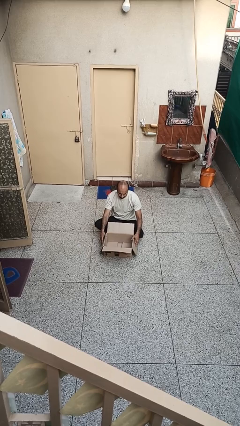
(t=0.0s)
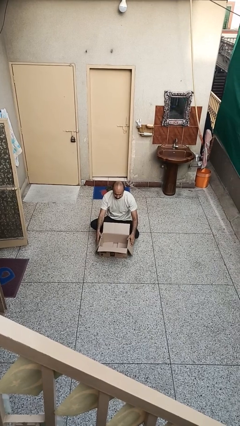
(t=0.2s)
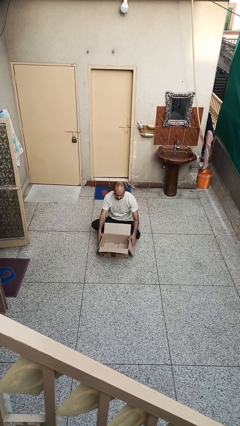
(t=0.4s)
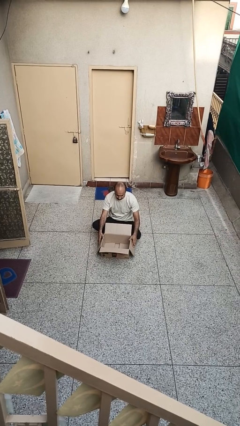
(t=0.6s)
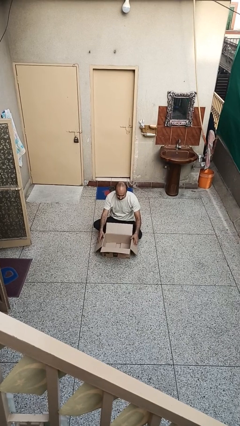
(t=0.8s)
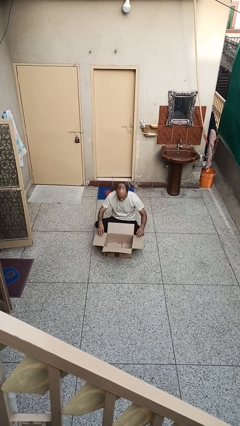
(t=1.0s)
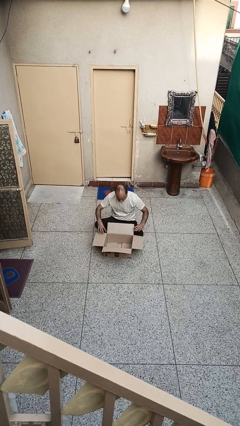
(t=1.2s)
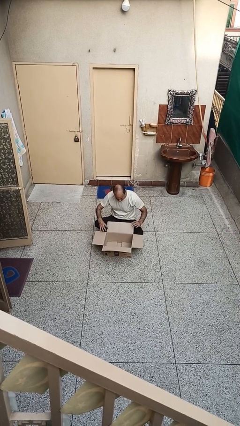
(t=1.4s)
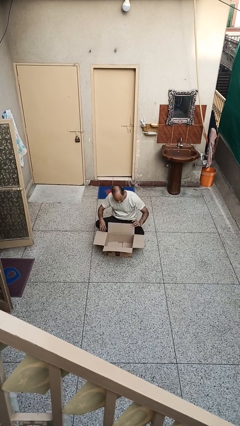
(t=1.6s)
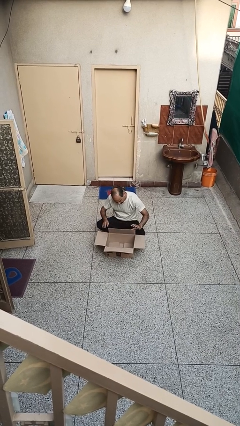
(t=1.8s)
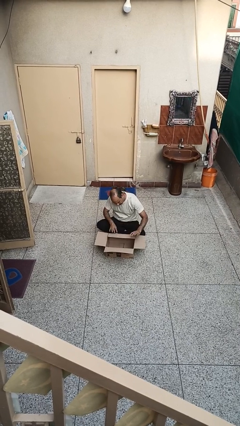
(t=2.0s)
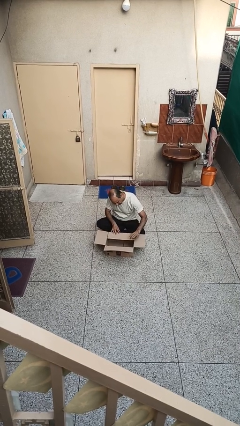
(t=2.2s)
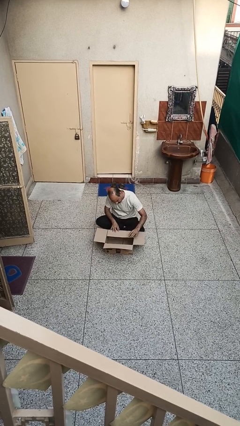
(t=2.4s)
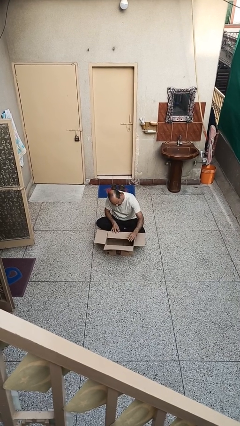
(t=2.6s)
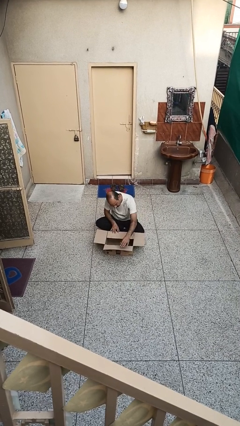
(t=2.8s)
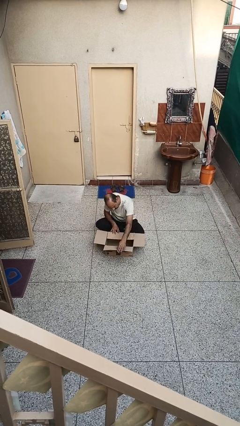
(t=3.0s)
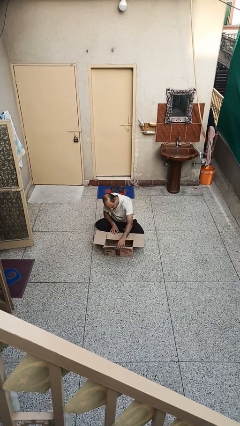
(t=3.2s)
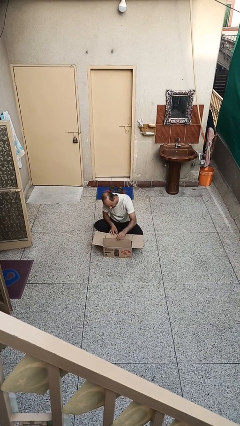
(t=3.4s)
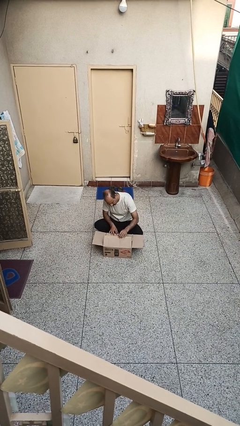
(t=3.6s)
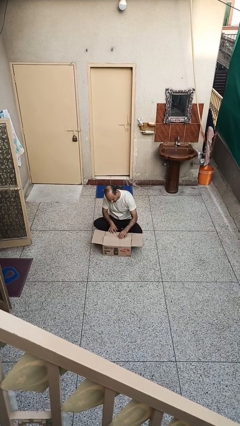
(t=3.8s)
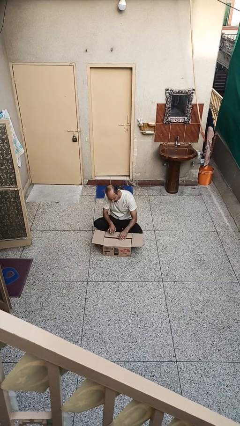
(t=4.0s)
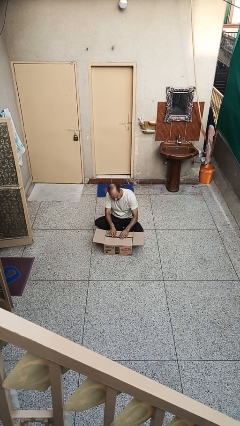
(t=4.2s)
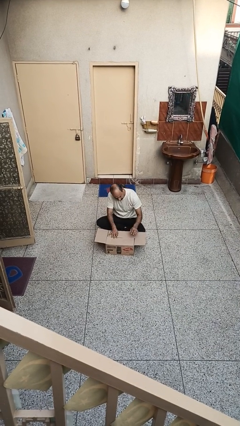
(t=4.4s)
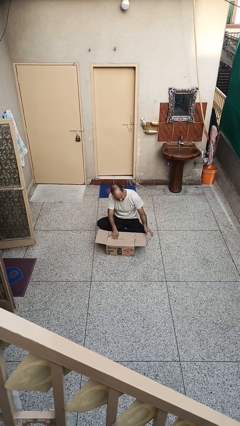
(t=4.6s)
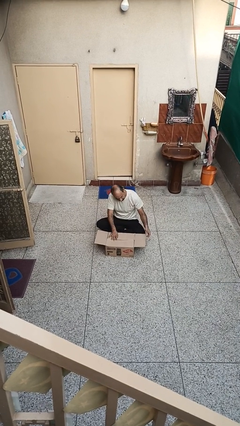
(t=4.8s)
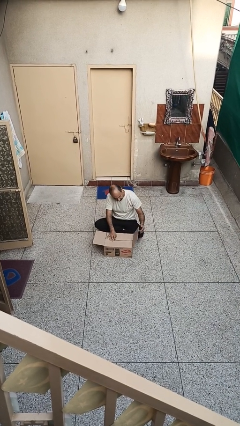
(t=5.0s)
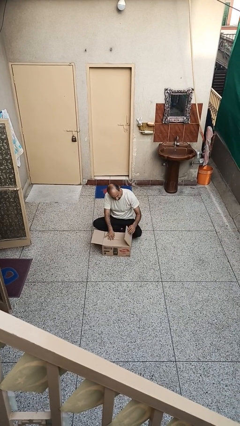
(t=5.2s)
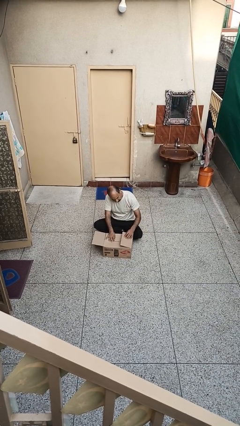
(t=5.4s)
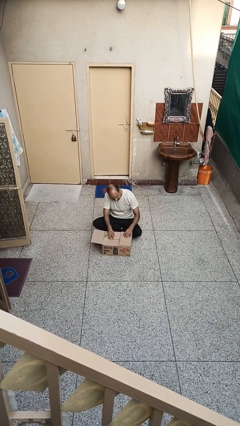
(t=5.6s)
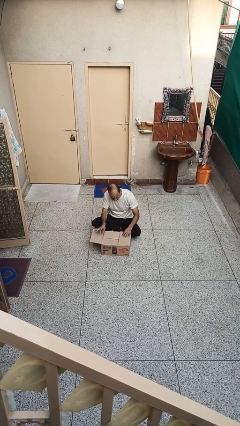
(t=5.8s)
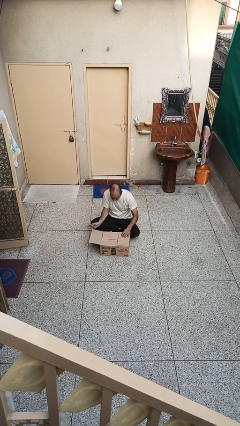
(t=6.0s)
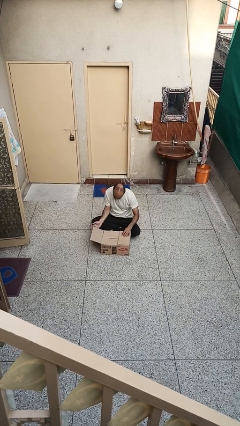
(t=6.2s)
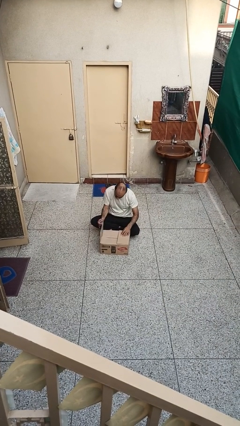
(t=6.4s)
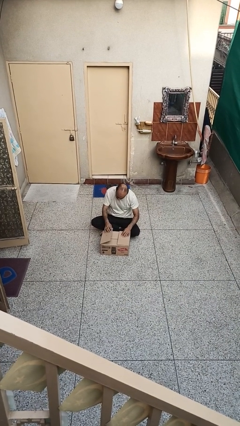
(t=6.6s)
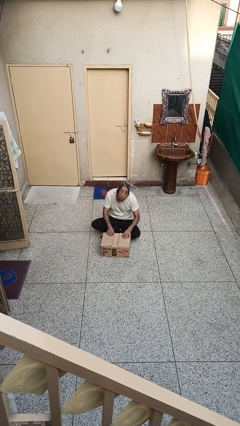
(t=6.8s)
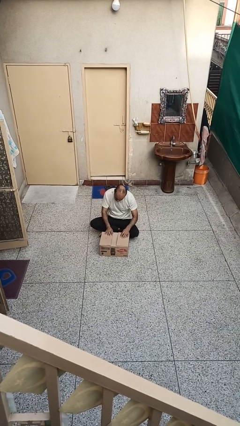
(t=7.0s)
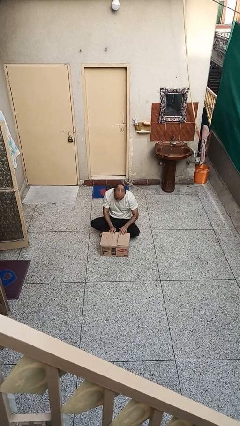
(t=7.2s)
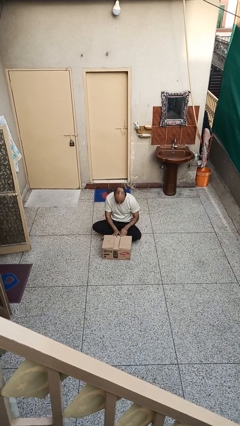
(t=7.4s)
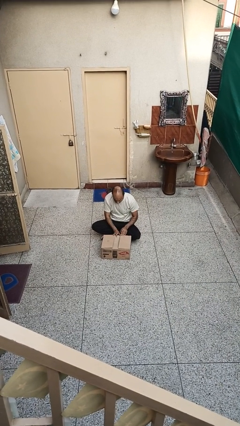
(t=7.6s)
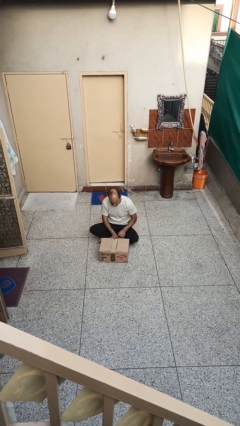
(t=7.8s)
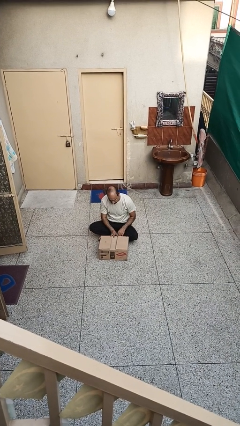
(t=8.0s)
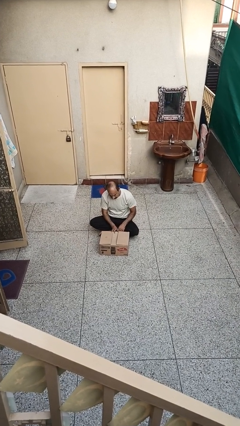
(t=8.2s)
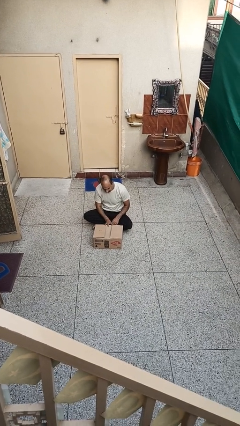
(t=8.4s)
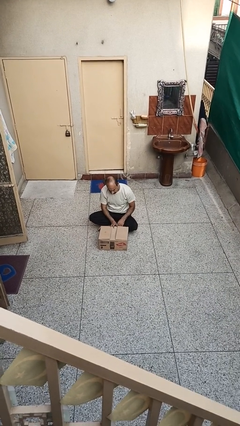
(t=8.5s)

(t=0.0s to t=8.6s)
person closes box

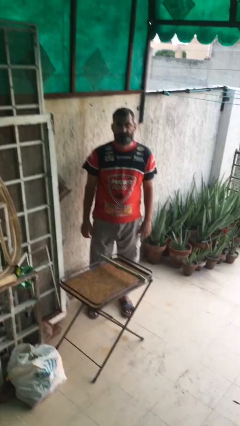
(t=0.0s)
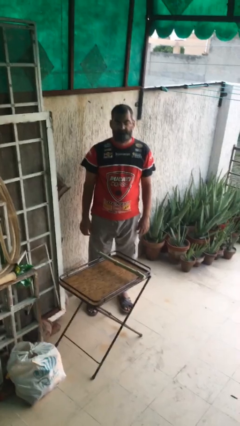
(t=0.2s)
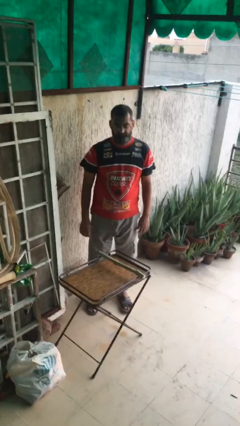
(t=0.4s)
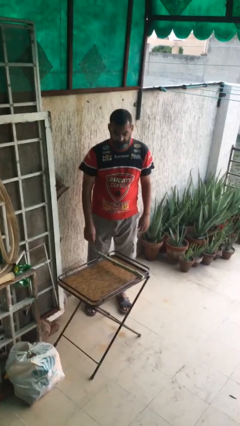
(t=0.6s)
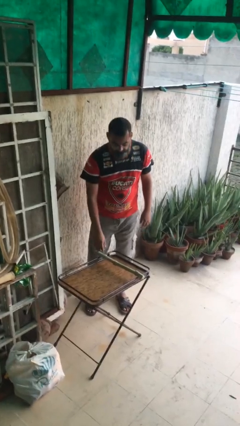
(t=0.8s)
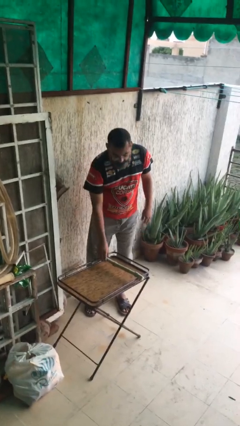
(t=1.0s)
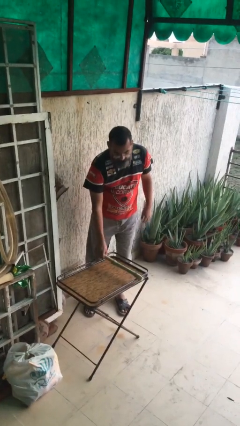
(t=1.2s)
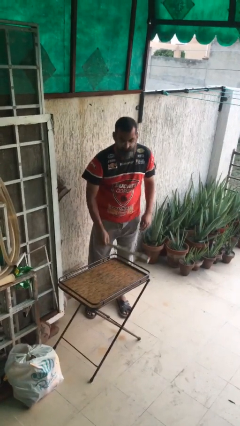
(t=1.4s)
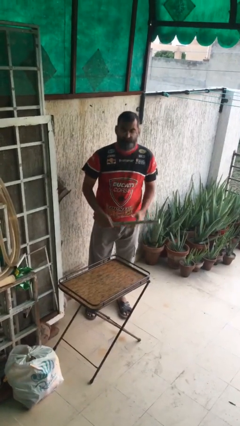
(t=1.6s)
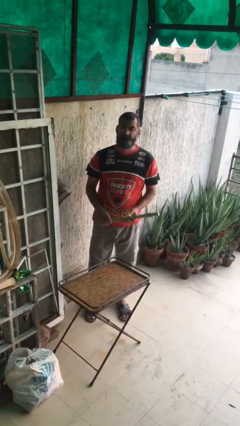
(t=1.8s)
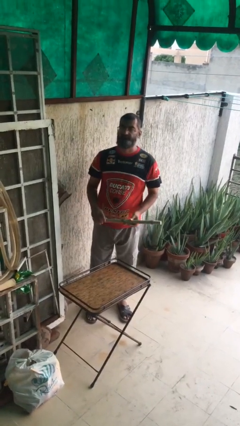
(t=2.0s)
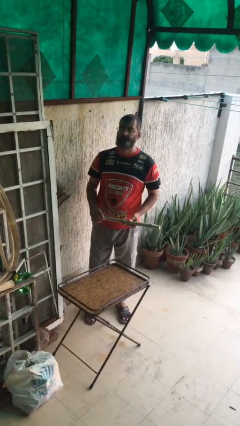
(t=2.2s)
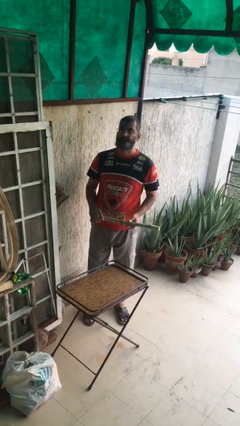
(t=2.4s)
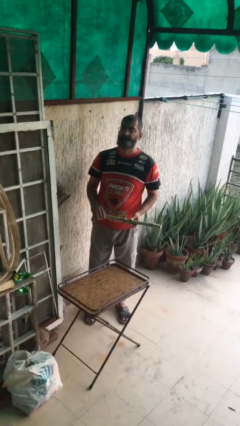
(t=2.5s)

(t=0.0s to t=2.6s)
person picks up object from table

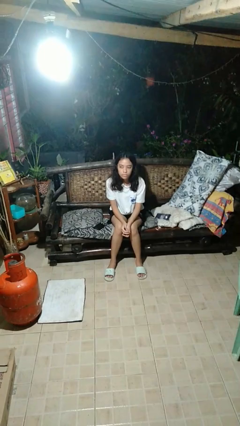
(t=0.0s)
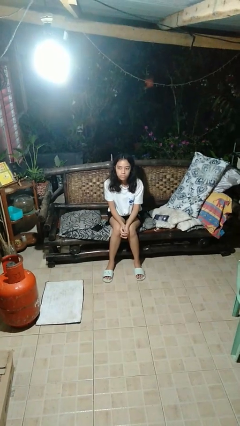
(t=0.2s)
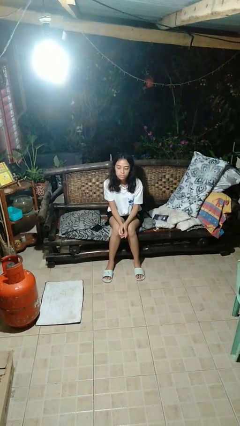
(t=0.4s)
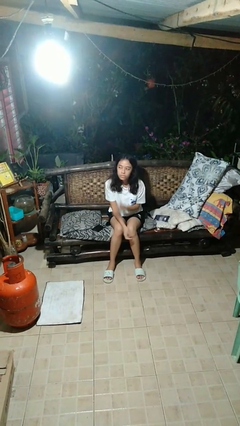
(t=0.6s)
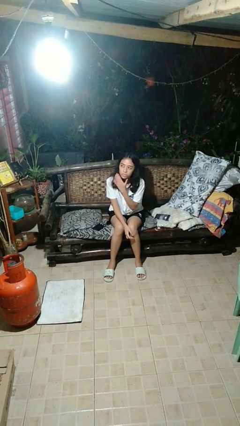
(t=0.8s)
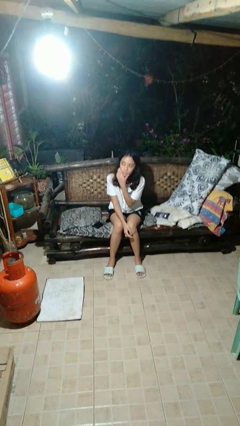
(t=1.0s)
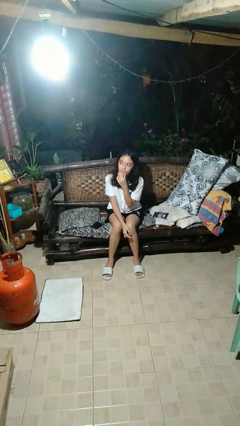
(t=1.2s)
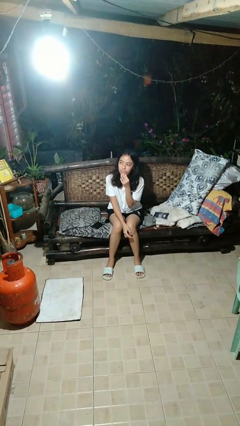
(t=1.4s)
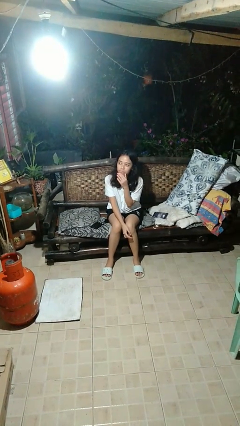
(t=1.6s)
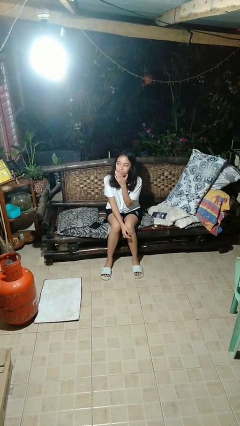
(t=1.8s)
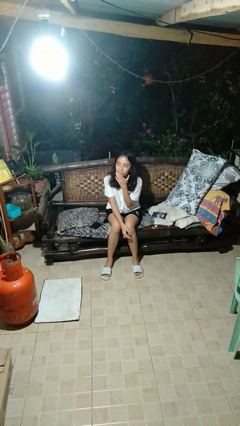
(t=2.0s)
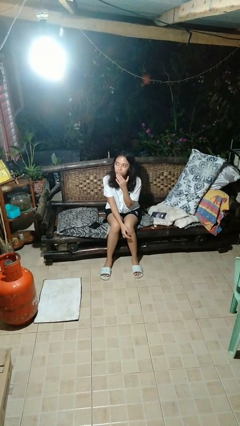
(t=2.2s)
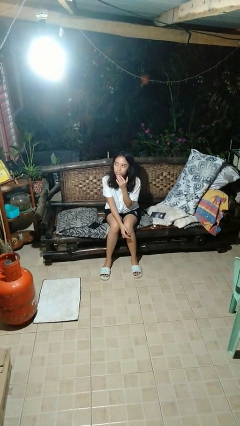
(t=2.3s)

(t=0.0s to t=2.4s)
person strokes chin

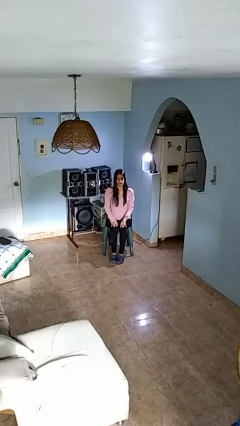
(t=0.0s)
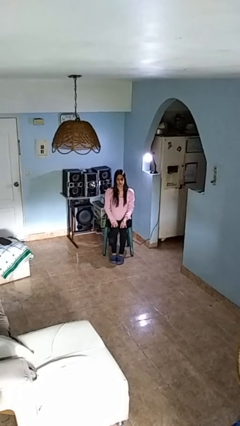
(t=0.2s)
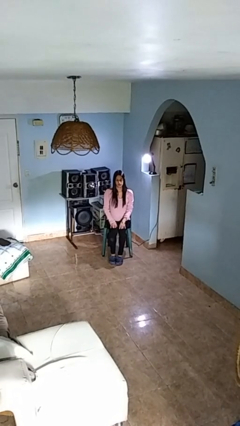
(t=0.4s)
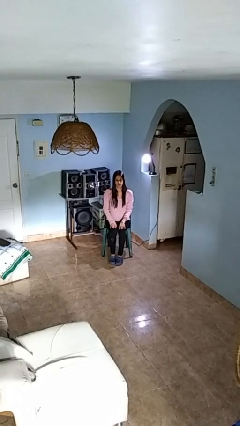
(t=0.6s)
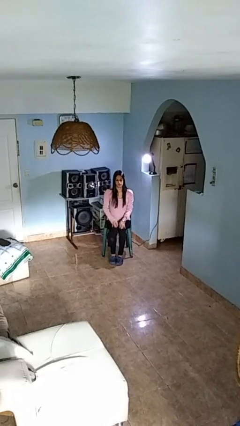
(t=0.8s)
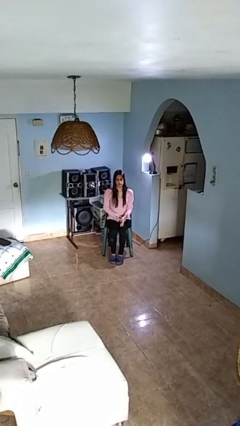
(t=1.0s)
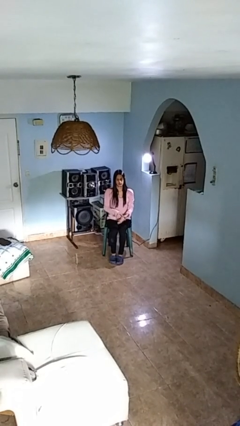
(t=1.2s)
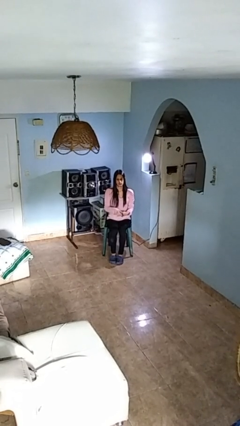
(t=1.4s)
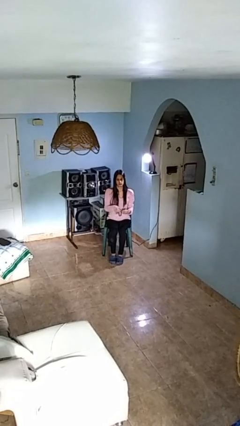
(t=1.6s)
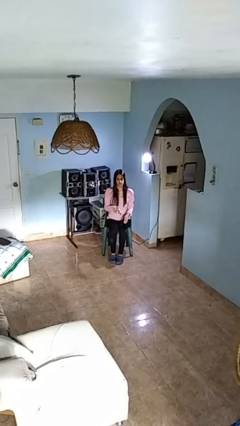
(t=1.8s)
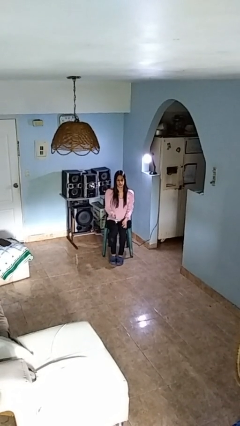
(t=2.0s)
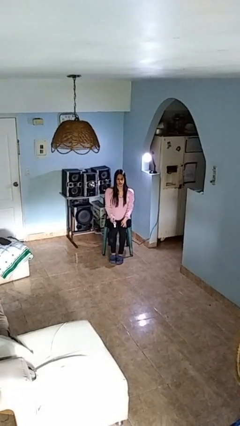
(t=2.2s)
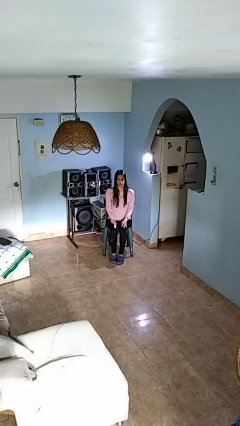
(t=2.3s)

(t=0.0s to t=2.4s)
person takes off wristwatch

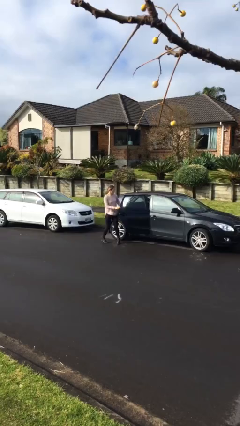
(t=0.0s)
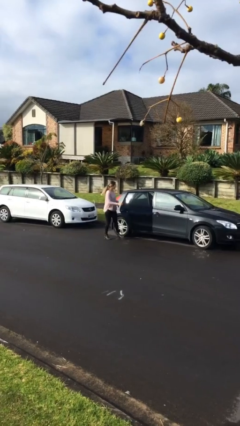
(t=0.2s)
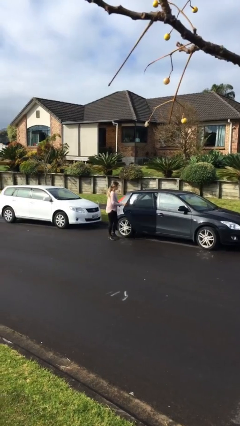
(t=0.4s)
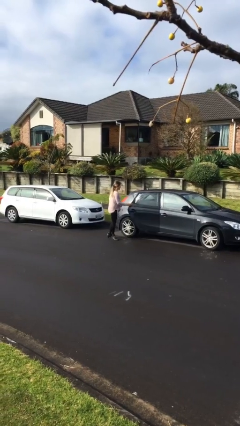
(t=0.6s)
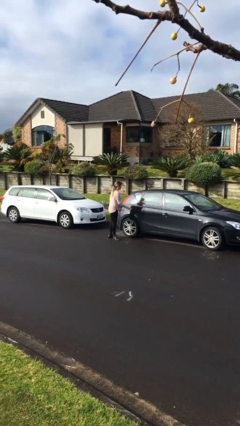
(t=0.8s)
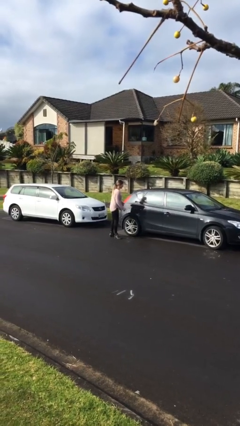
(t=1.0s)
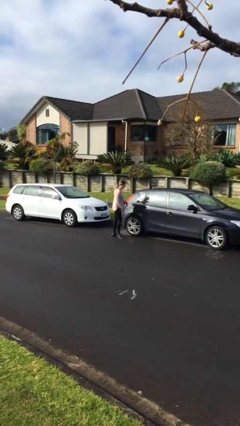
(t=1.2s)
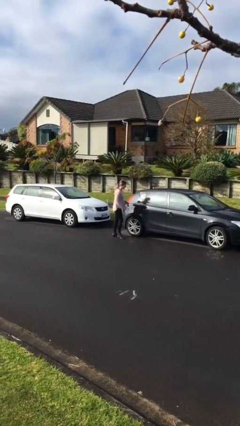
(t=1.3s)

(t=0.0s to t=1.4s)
person closes car door

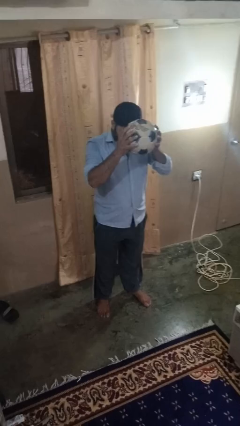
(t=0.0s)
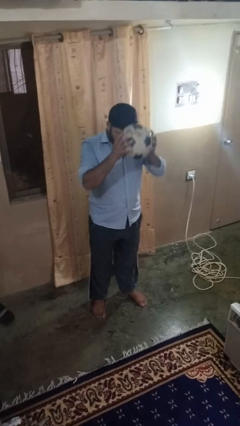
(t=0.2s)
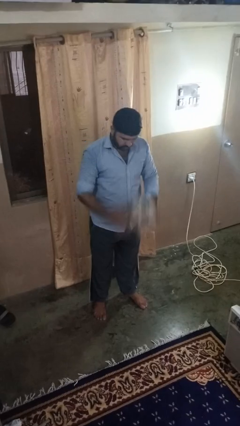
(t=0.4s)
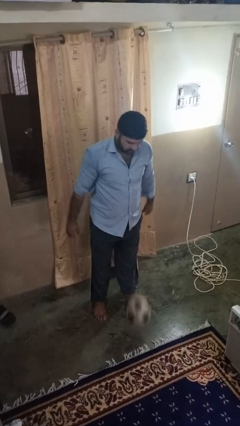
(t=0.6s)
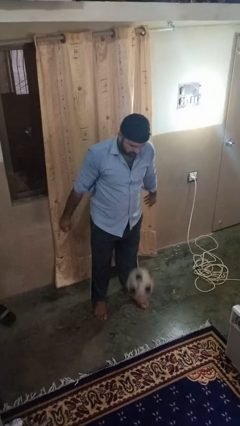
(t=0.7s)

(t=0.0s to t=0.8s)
person bounces ball on floor
